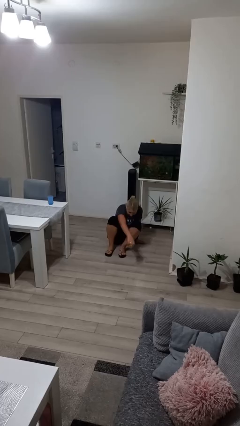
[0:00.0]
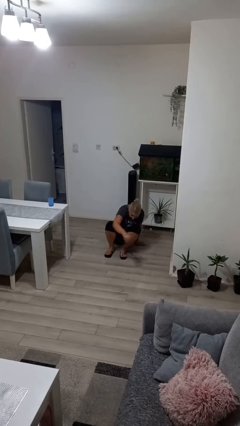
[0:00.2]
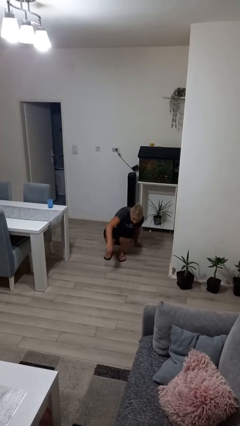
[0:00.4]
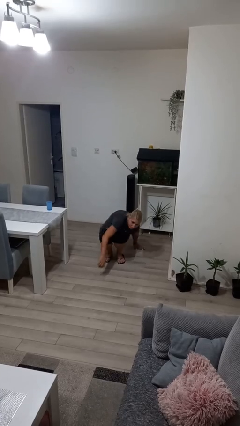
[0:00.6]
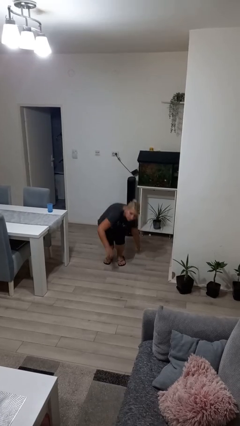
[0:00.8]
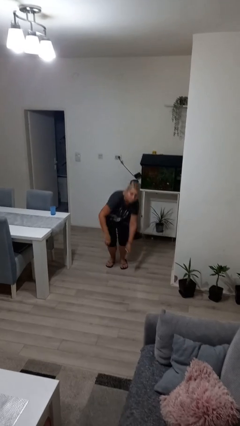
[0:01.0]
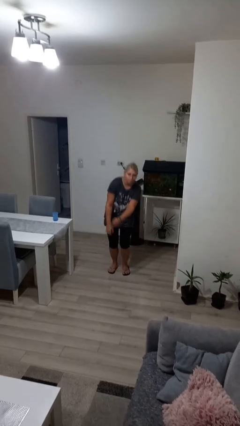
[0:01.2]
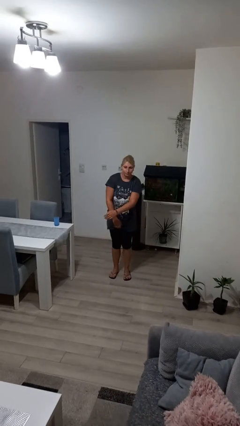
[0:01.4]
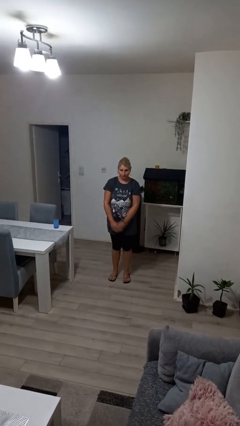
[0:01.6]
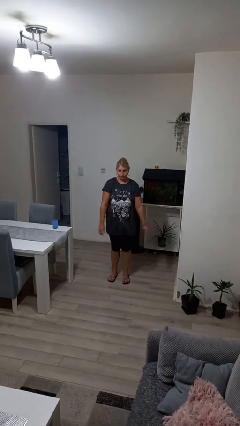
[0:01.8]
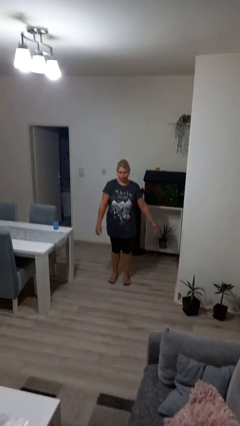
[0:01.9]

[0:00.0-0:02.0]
person stands up from floor

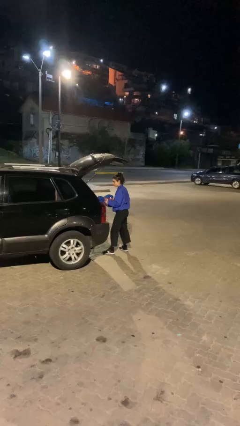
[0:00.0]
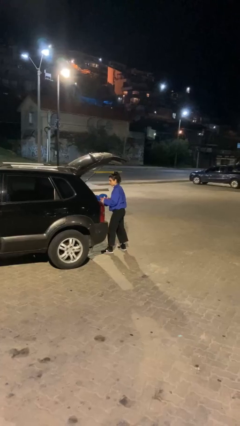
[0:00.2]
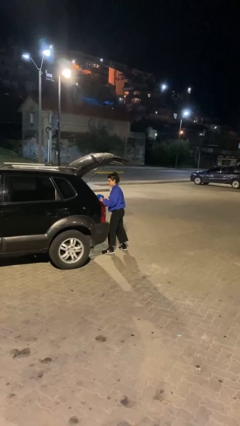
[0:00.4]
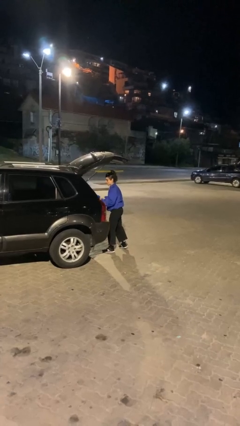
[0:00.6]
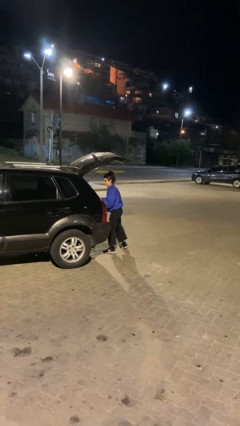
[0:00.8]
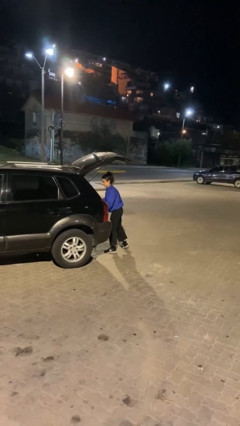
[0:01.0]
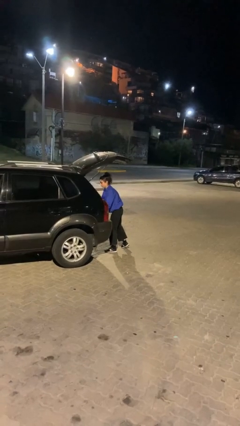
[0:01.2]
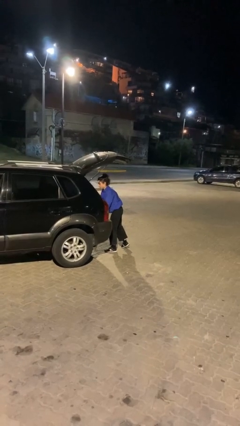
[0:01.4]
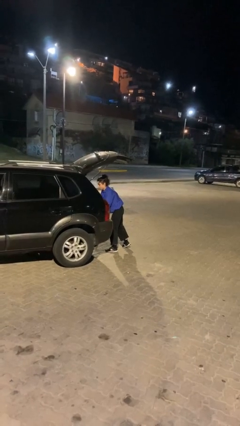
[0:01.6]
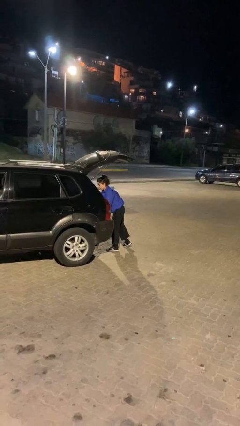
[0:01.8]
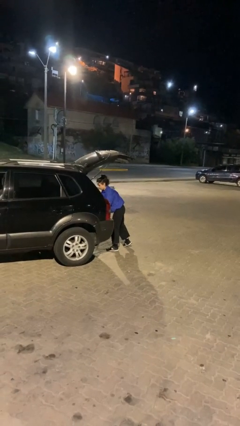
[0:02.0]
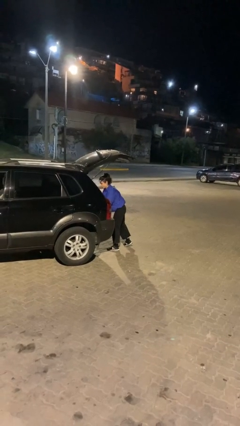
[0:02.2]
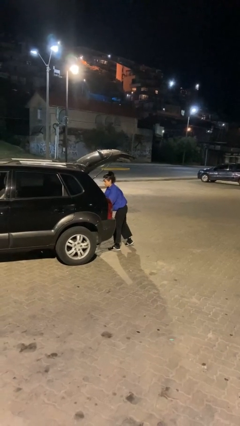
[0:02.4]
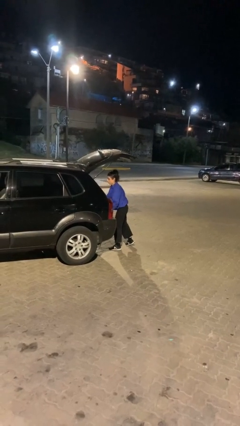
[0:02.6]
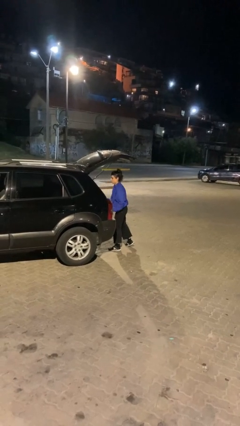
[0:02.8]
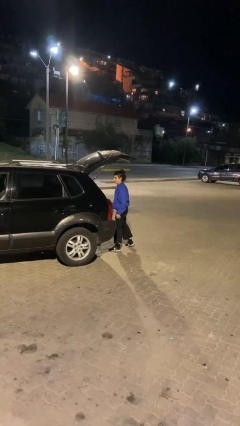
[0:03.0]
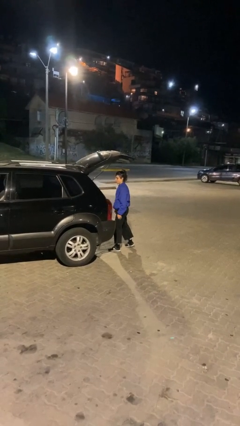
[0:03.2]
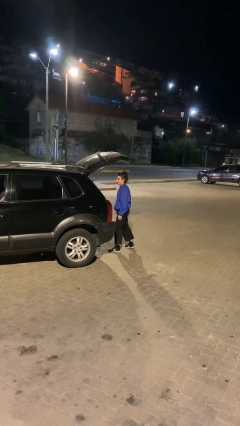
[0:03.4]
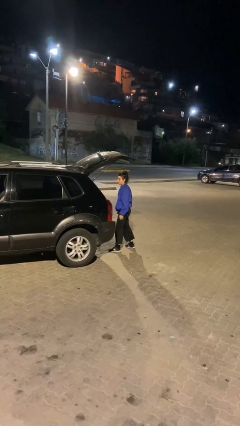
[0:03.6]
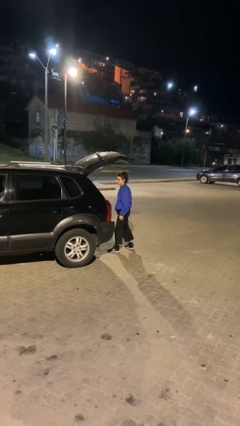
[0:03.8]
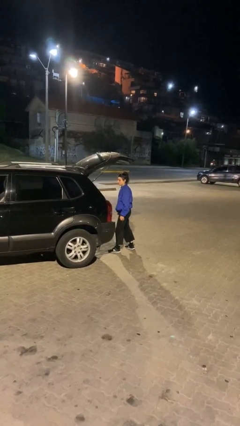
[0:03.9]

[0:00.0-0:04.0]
person loads car

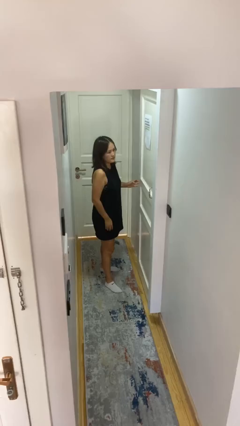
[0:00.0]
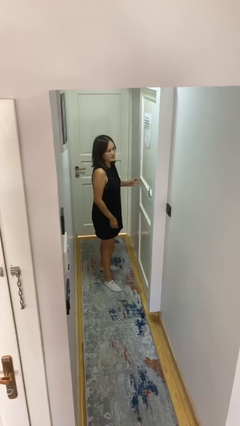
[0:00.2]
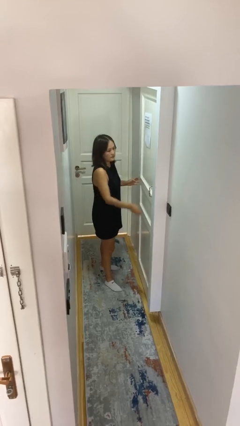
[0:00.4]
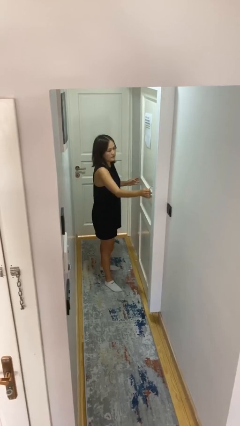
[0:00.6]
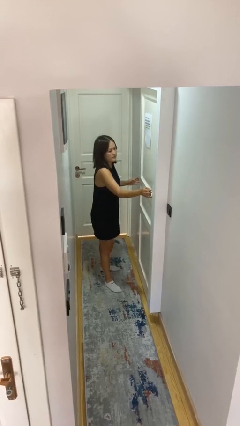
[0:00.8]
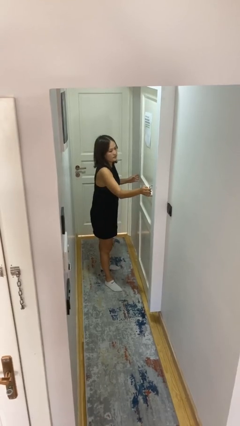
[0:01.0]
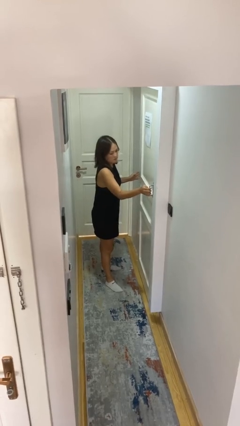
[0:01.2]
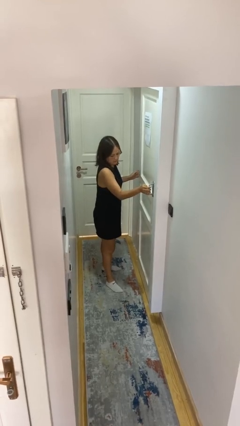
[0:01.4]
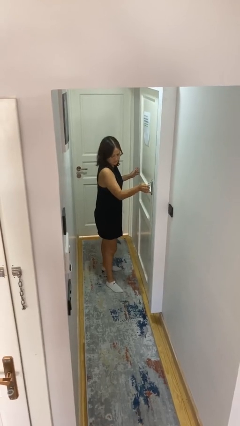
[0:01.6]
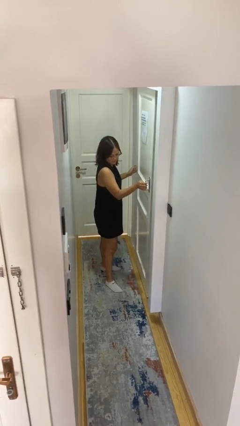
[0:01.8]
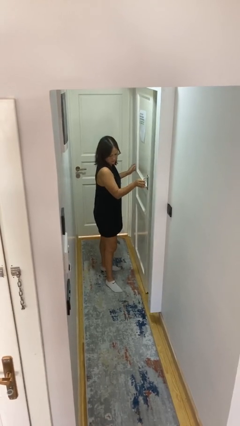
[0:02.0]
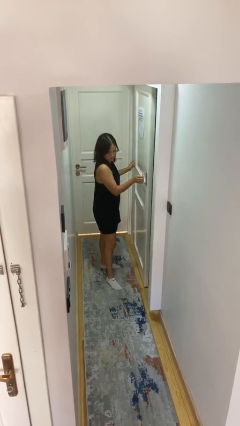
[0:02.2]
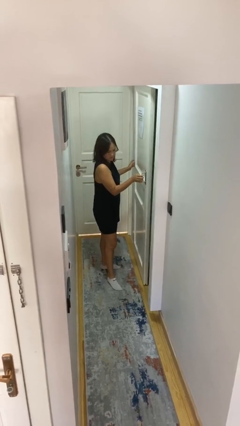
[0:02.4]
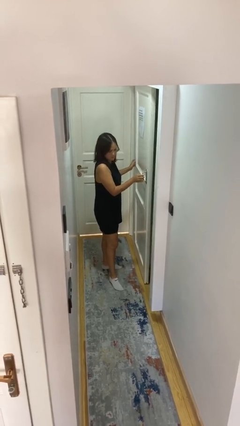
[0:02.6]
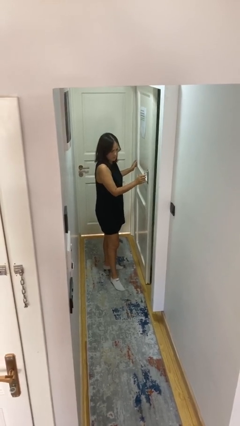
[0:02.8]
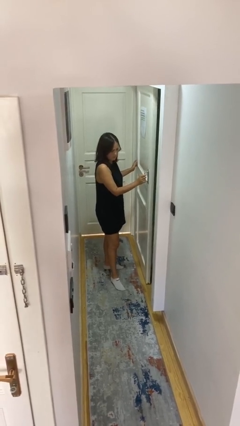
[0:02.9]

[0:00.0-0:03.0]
person opens sliding door

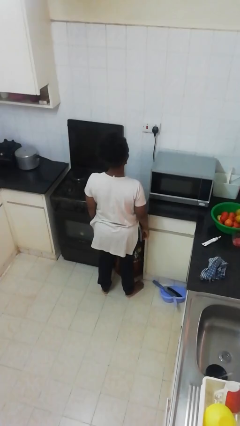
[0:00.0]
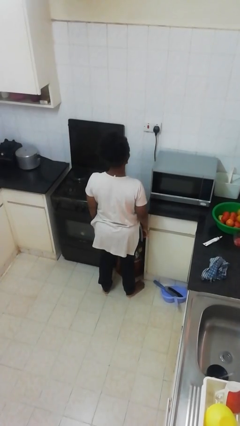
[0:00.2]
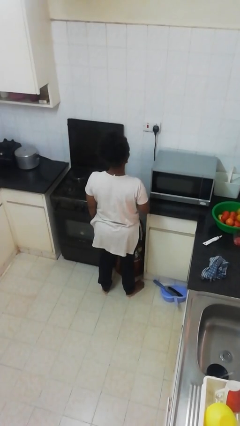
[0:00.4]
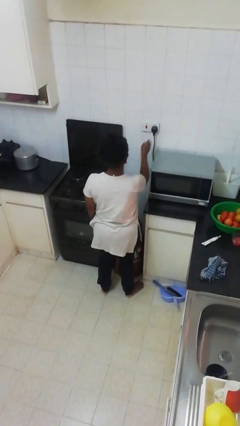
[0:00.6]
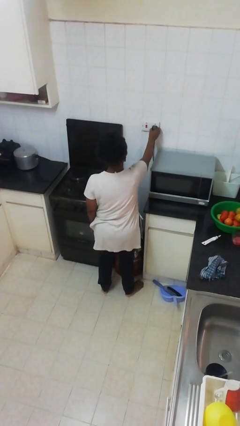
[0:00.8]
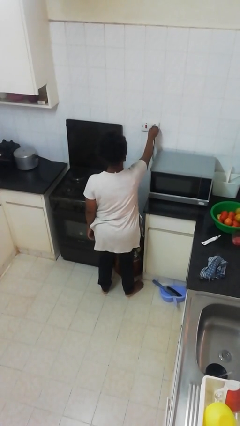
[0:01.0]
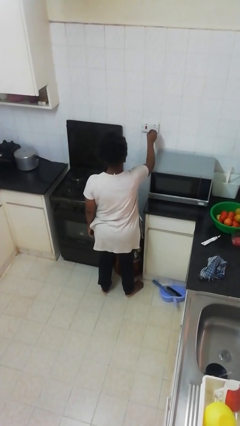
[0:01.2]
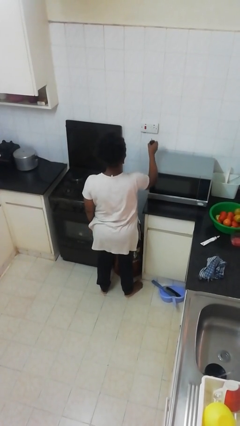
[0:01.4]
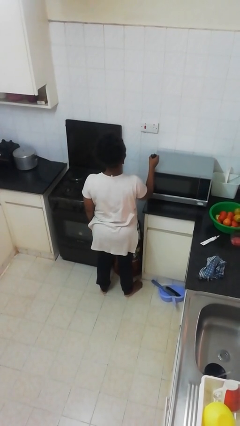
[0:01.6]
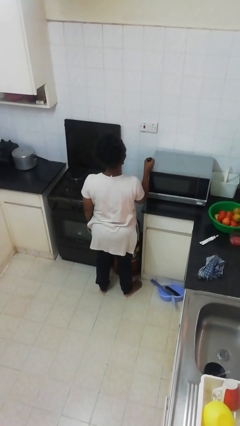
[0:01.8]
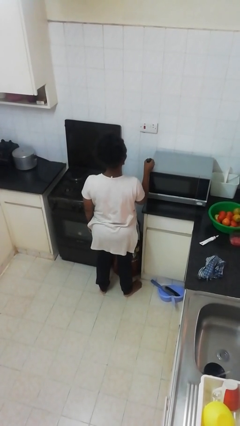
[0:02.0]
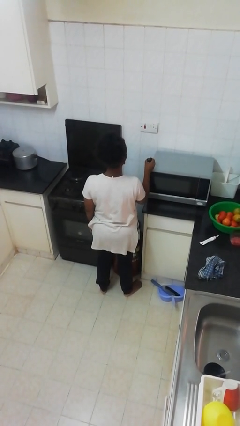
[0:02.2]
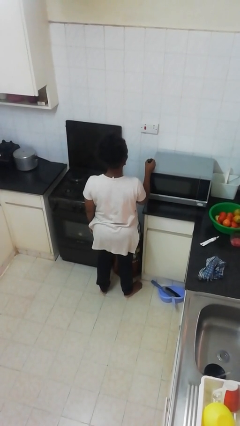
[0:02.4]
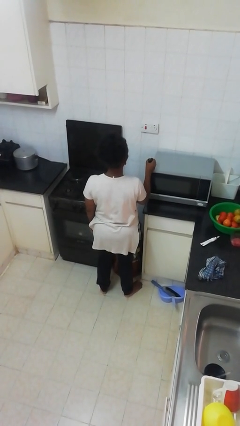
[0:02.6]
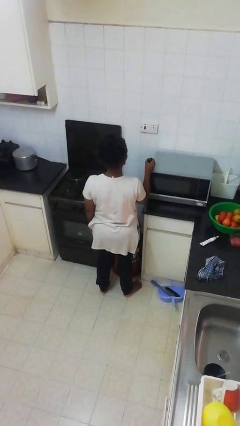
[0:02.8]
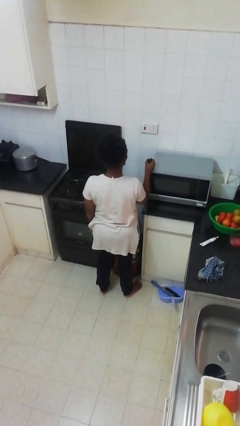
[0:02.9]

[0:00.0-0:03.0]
person unplugs from electrical socket

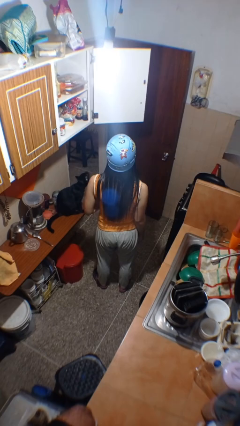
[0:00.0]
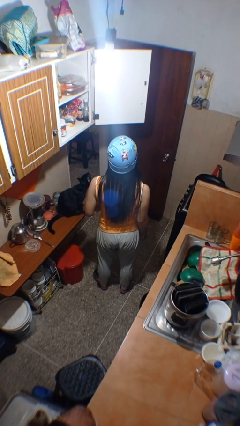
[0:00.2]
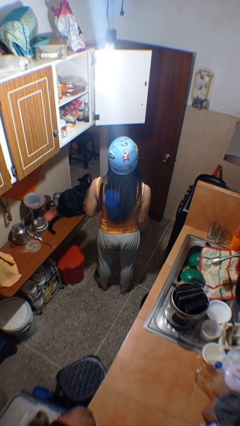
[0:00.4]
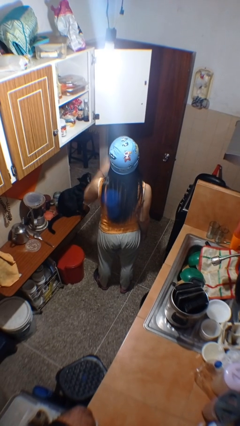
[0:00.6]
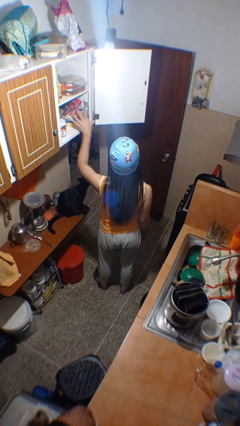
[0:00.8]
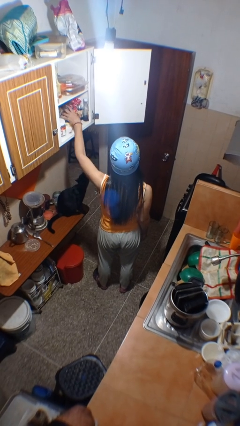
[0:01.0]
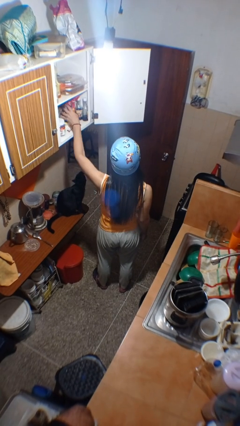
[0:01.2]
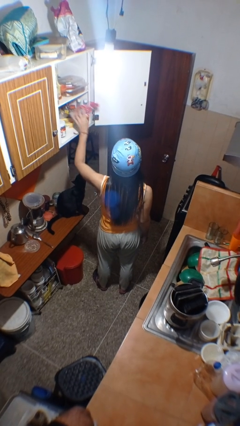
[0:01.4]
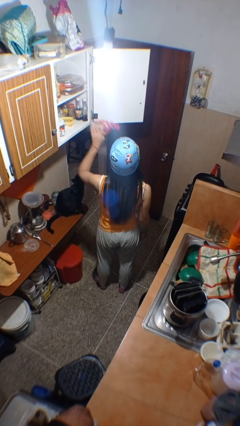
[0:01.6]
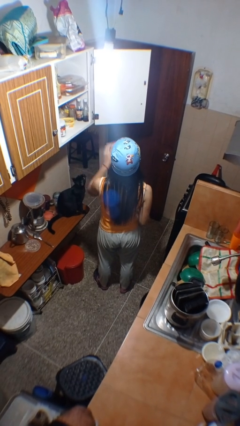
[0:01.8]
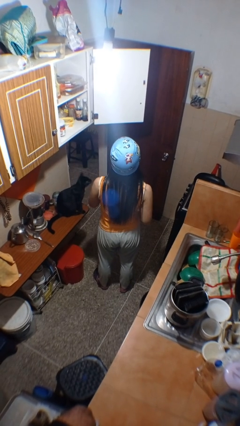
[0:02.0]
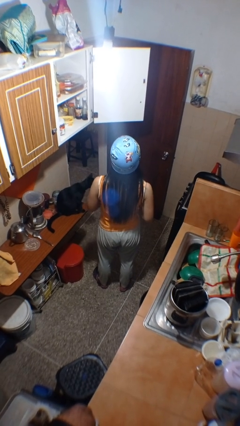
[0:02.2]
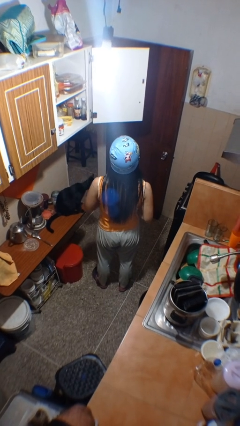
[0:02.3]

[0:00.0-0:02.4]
person picks up object from cabinet

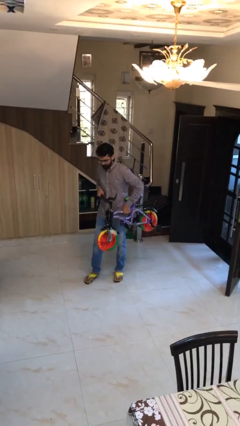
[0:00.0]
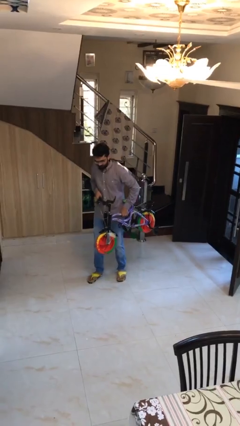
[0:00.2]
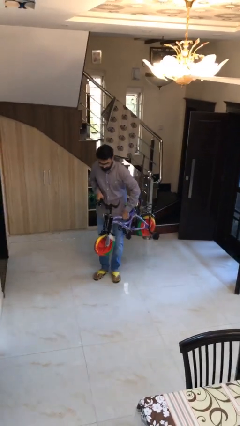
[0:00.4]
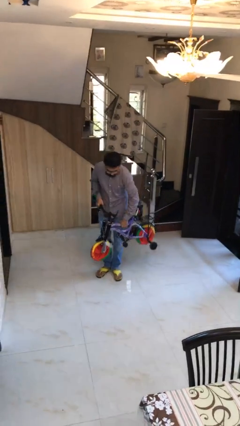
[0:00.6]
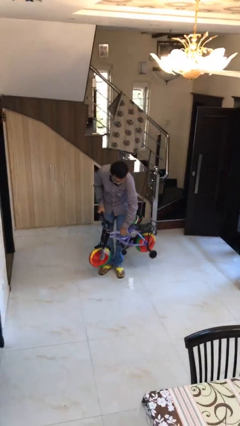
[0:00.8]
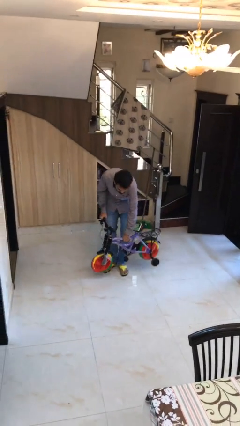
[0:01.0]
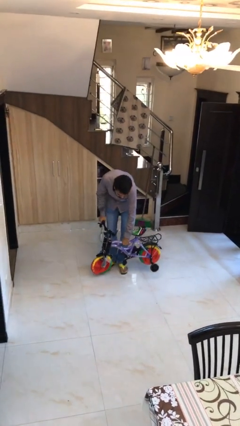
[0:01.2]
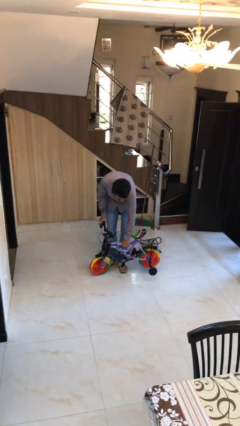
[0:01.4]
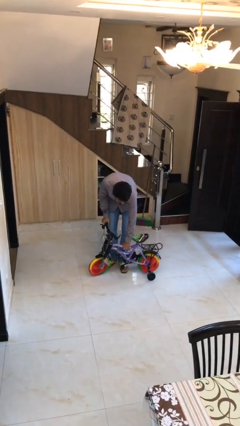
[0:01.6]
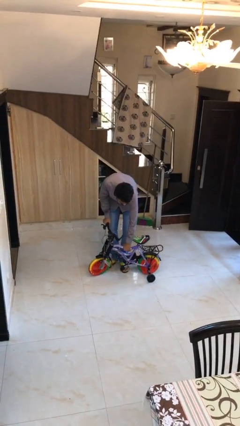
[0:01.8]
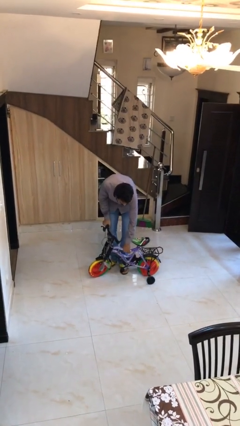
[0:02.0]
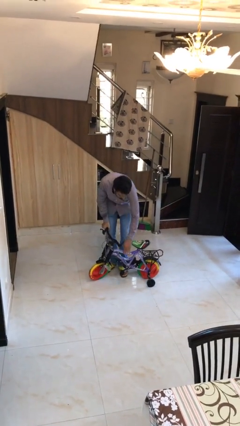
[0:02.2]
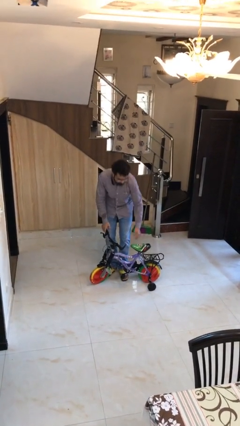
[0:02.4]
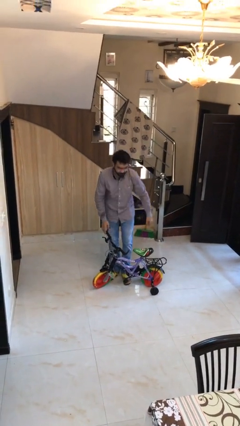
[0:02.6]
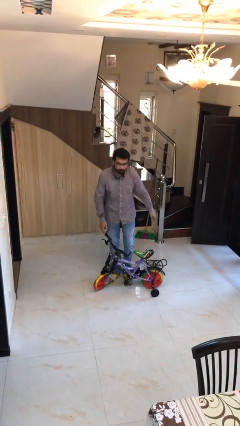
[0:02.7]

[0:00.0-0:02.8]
person puts down object on floor

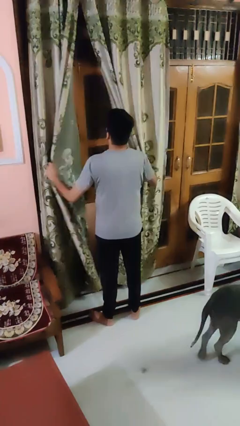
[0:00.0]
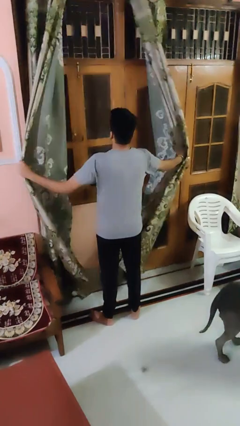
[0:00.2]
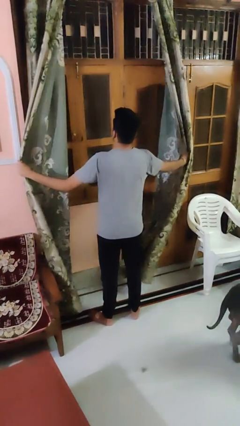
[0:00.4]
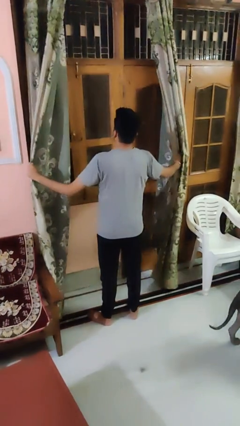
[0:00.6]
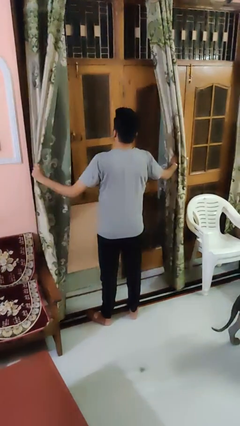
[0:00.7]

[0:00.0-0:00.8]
person opens curtains
